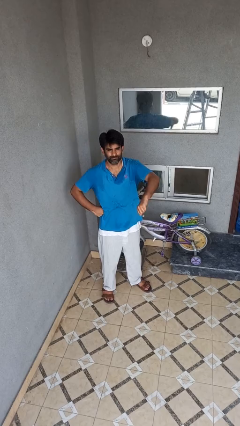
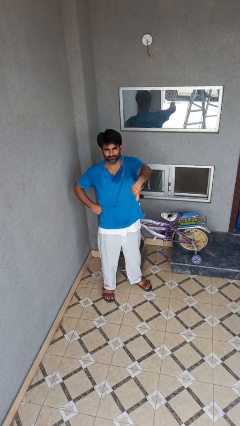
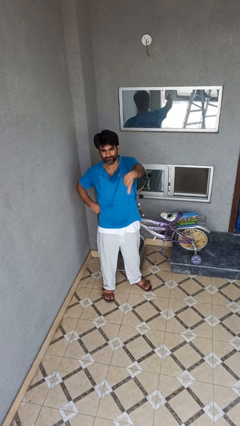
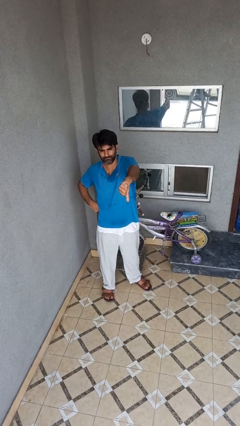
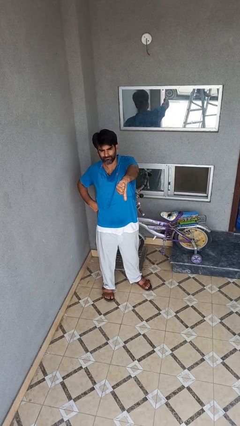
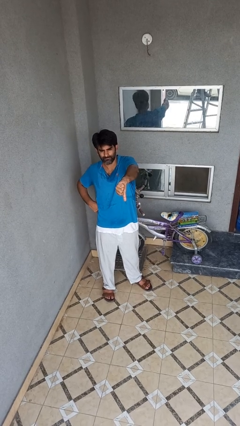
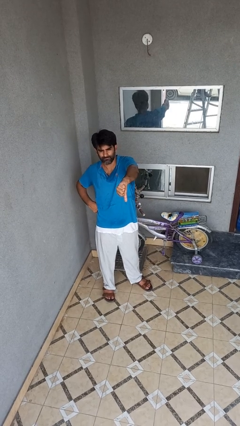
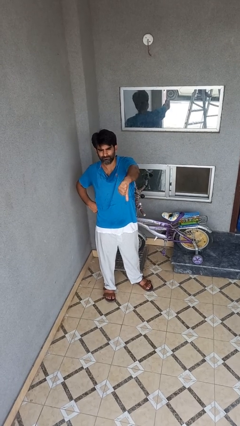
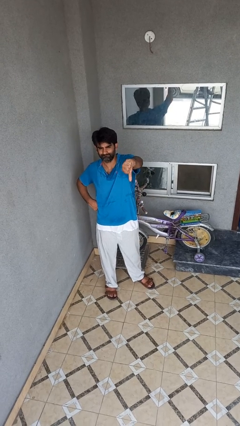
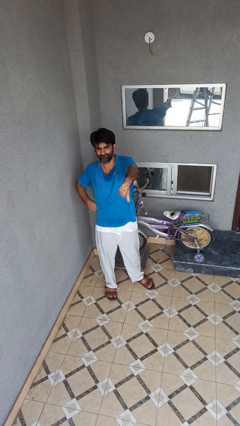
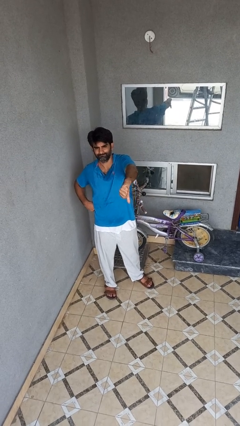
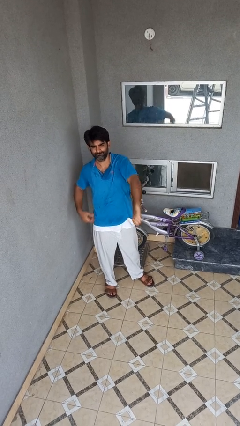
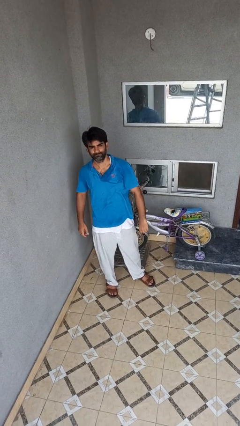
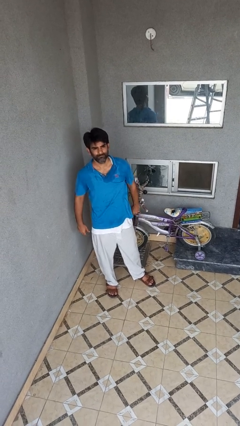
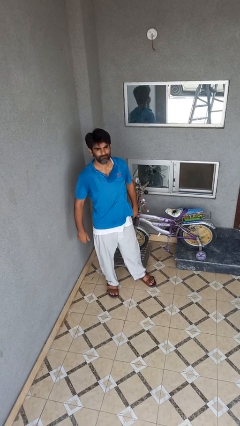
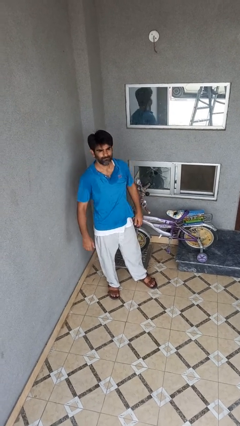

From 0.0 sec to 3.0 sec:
person gestures thumbs down

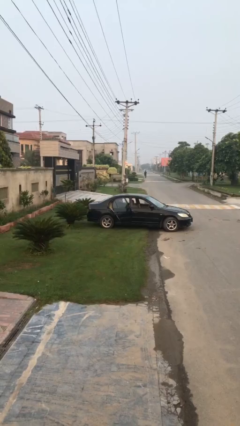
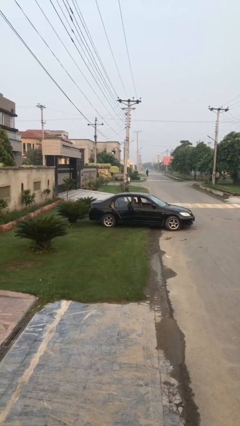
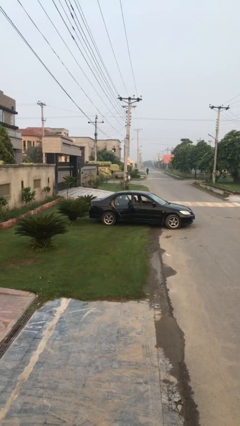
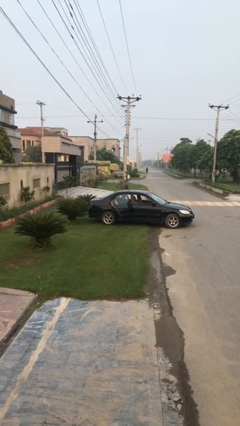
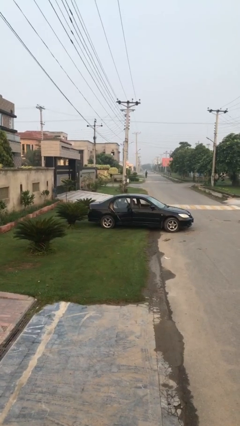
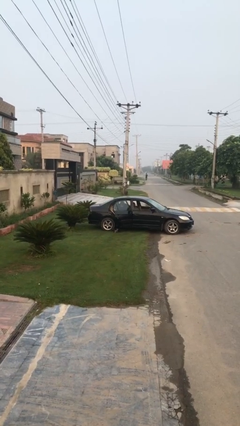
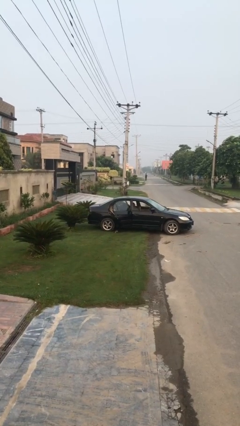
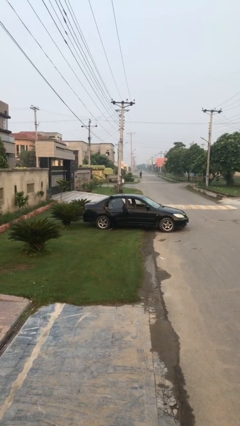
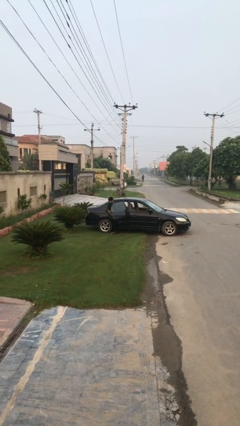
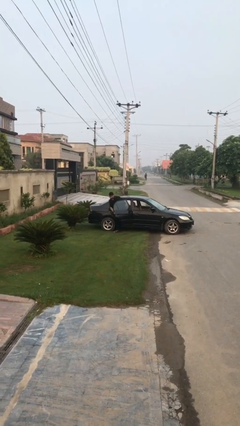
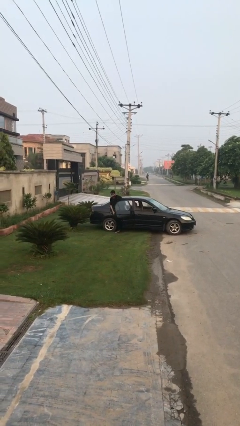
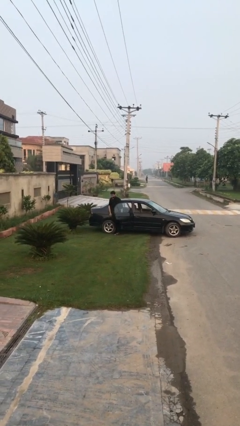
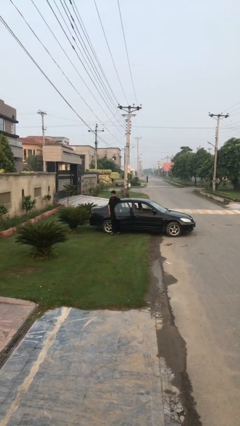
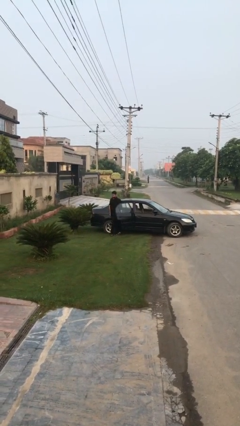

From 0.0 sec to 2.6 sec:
person exits car

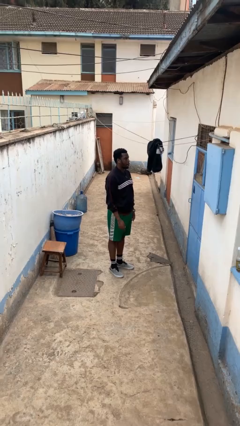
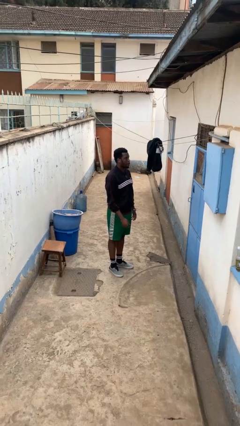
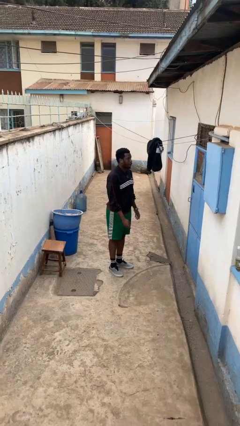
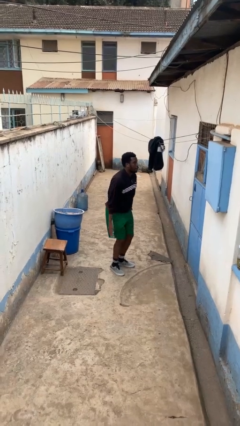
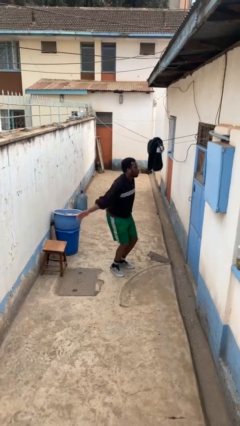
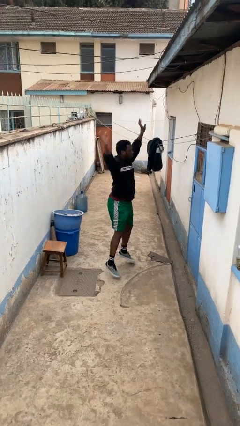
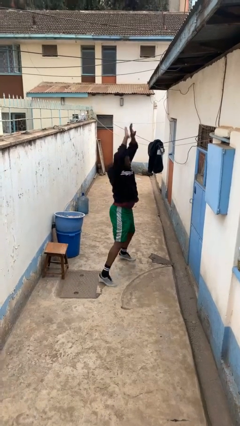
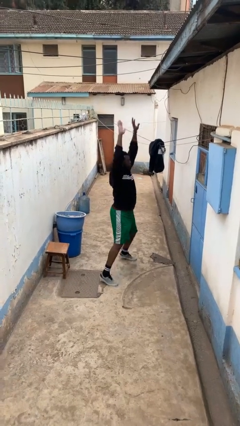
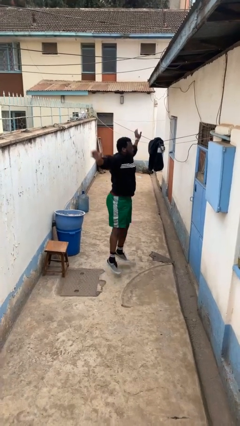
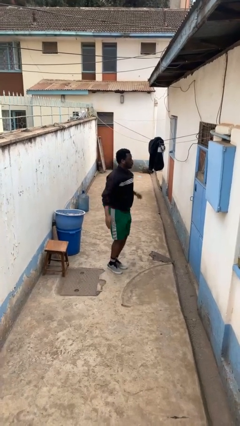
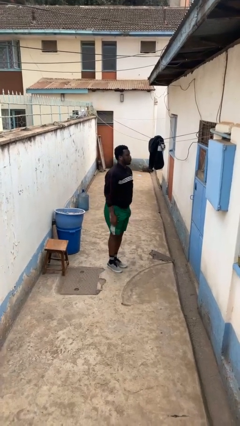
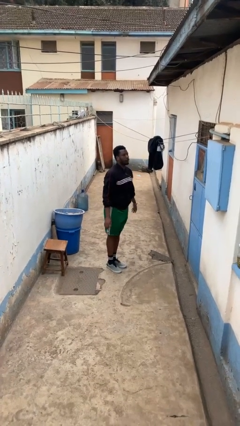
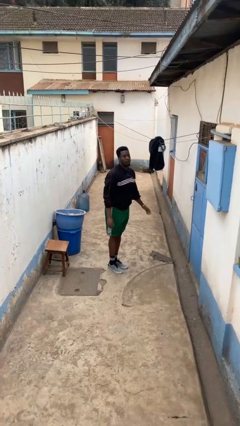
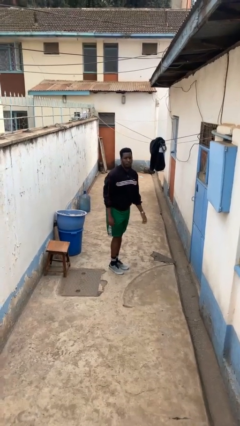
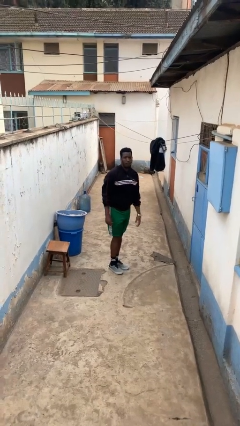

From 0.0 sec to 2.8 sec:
person exercises with jumping jacks

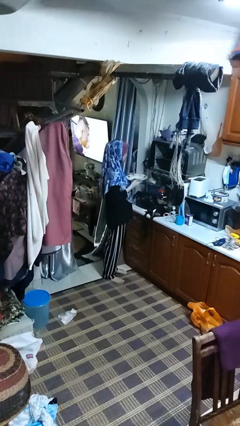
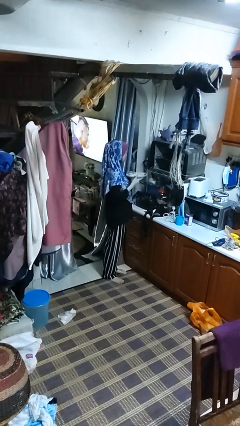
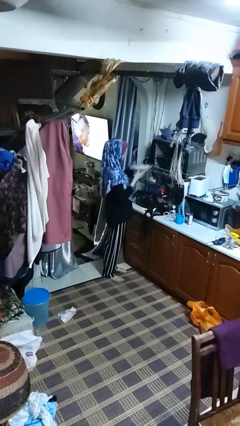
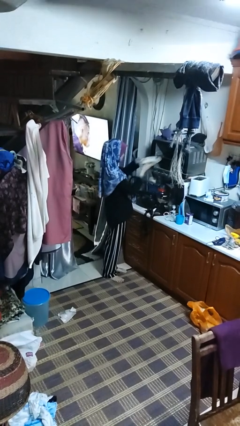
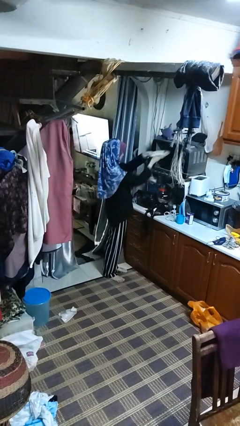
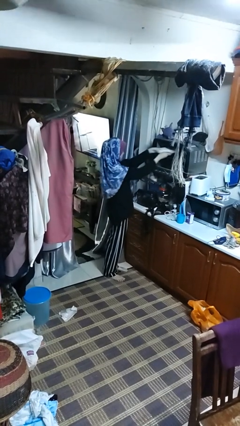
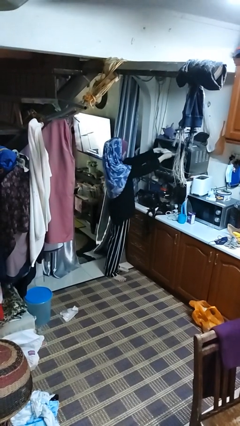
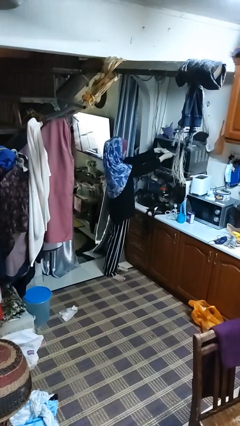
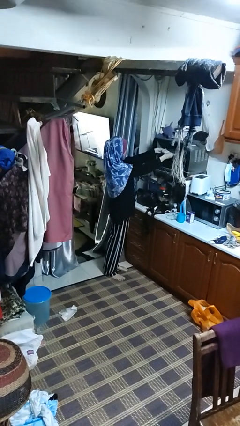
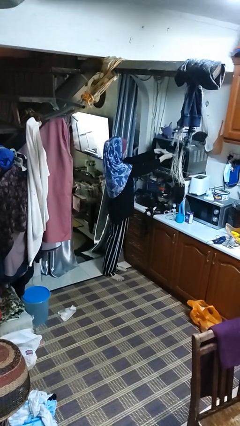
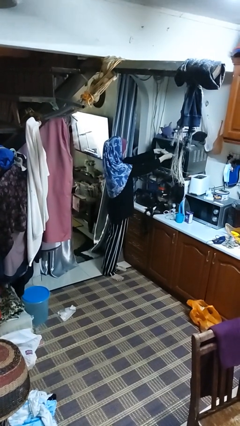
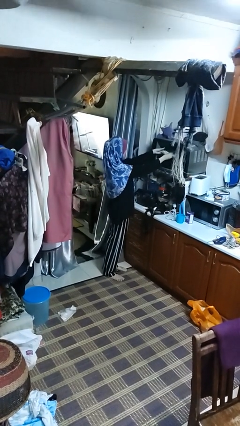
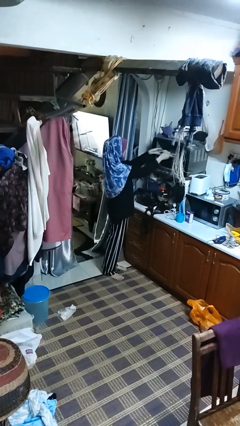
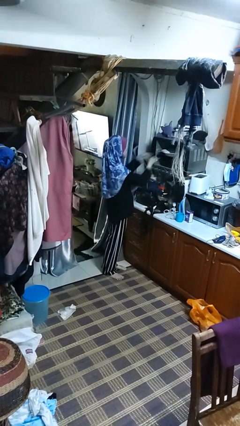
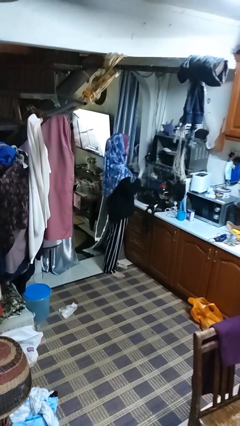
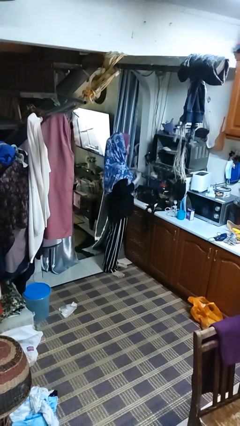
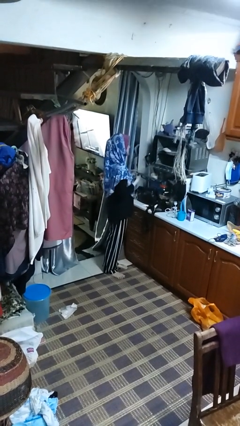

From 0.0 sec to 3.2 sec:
person puts object into oven

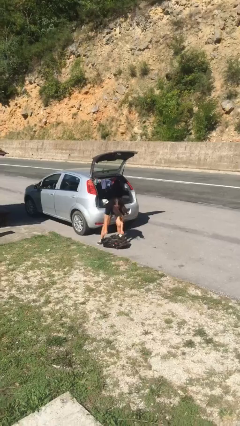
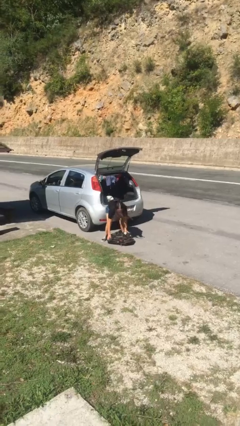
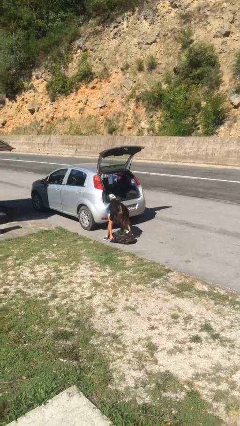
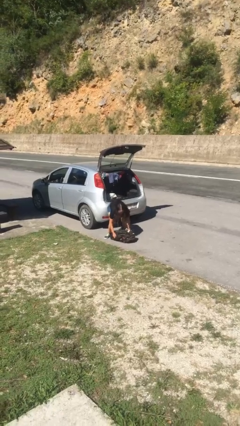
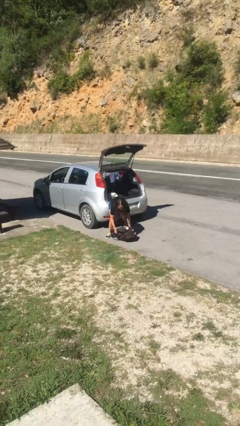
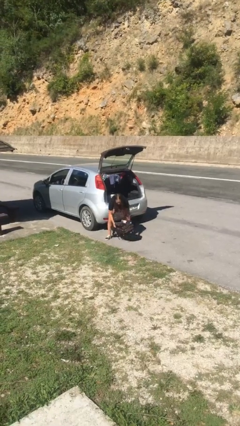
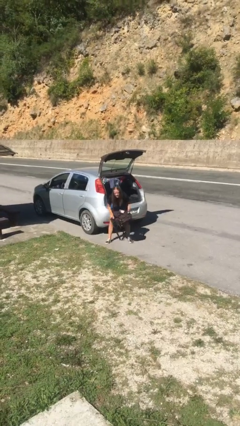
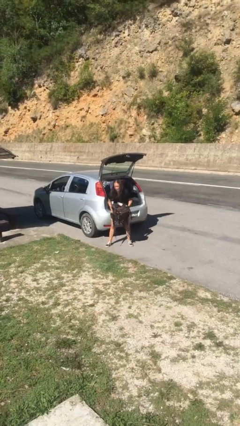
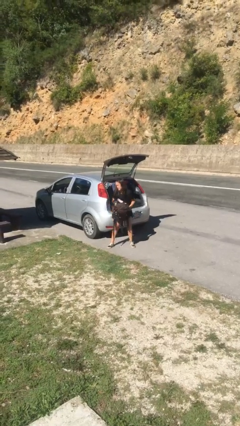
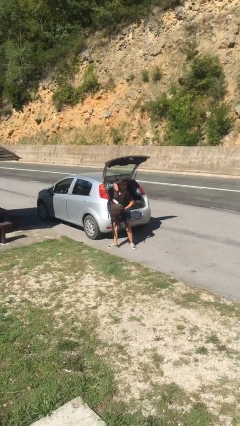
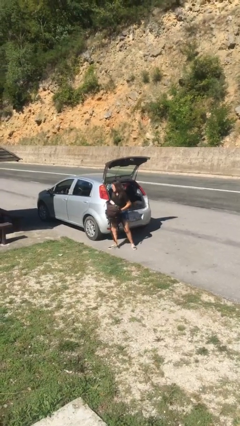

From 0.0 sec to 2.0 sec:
person picks up object from floor

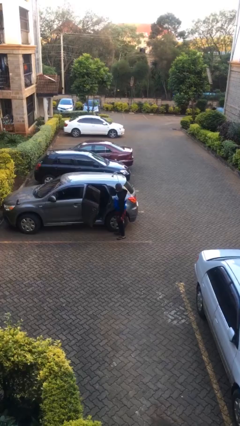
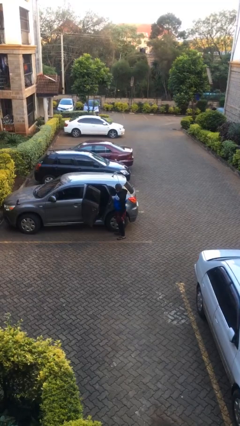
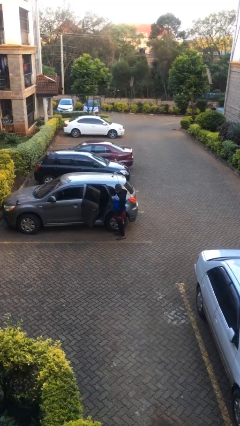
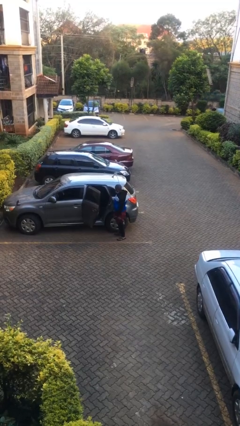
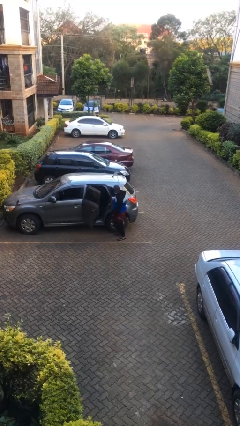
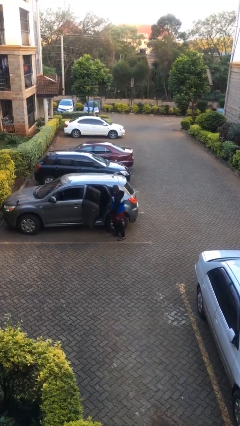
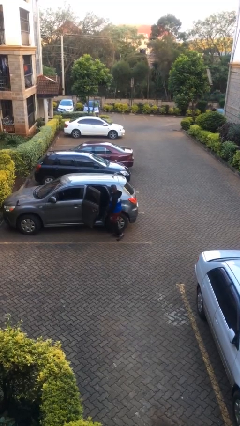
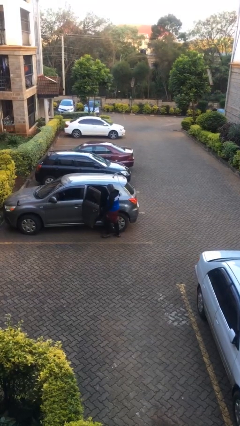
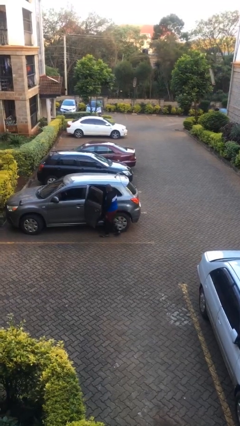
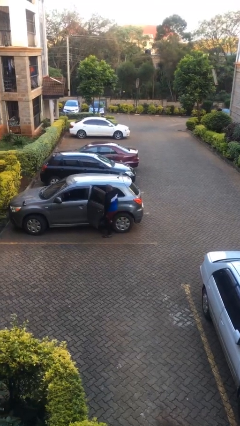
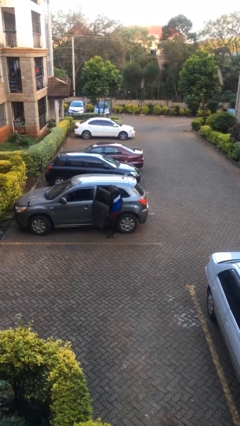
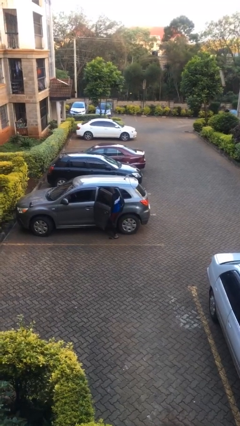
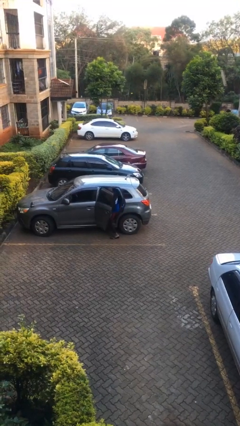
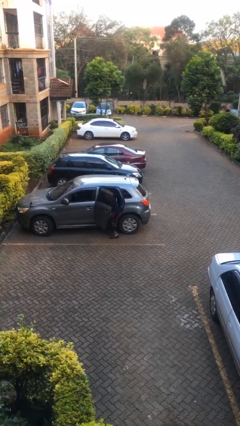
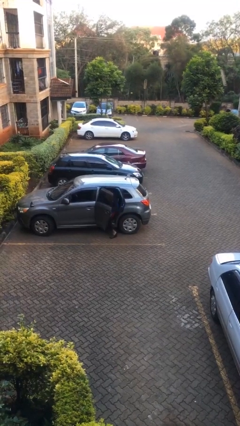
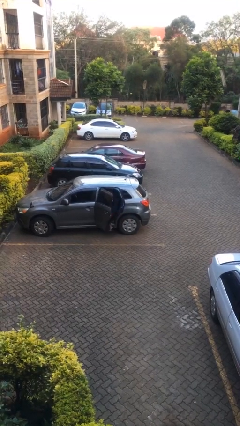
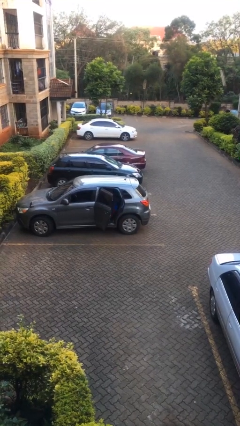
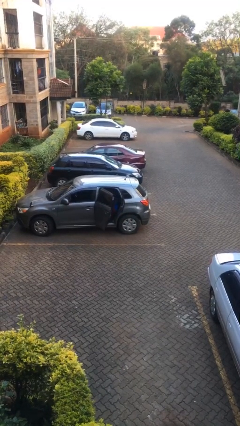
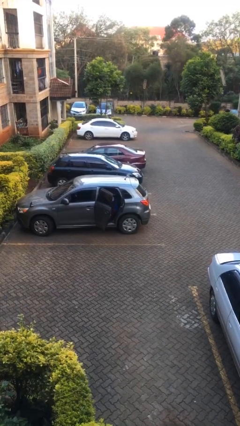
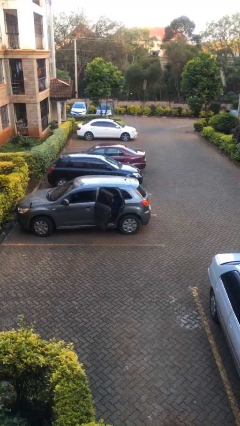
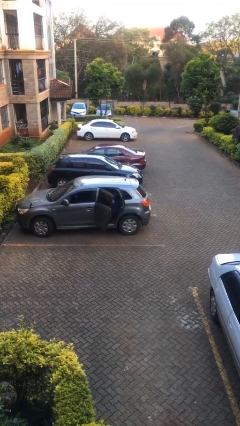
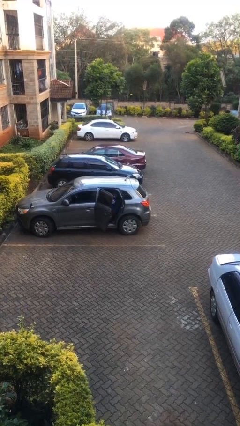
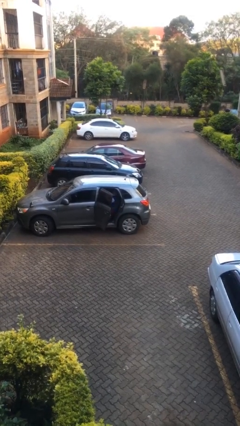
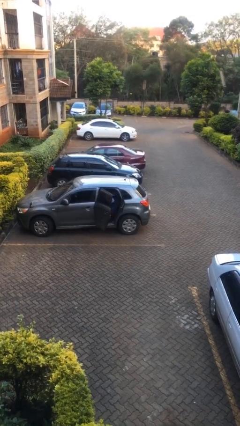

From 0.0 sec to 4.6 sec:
person enters car
